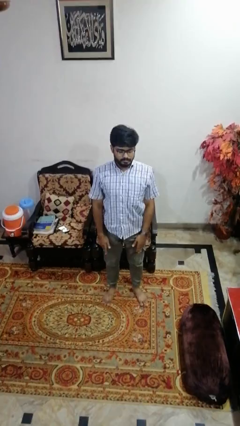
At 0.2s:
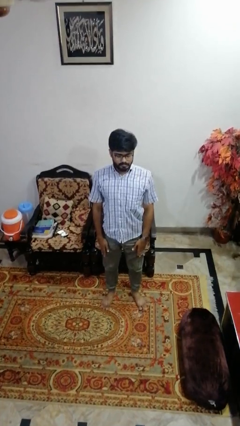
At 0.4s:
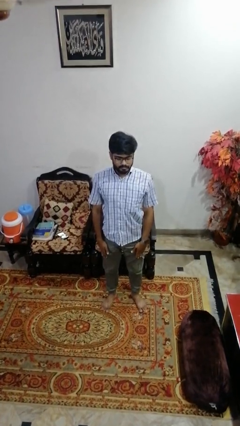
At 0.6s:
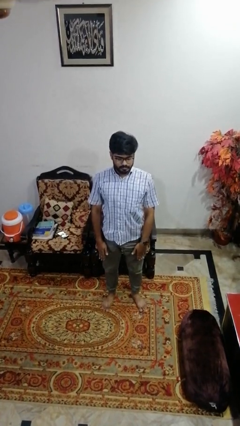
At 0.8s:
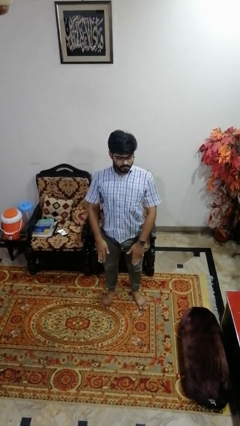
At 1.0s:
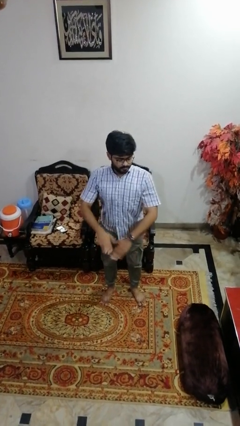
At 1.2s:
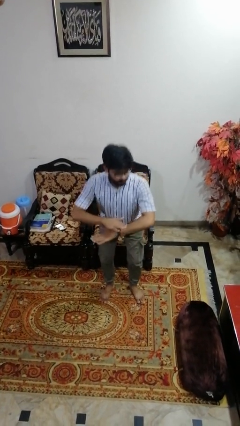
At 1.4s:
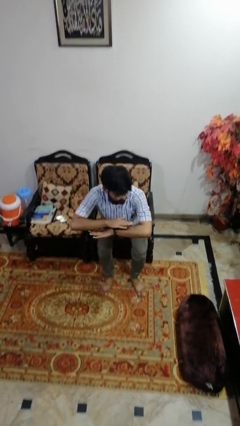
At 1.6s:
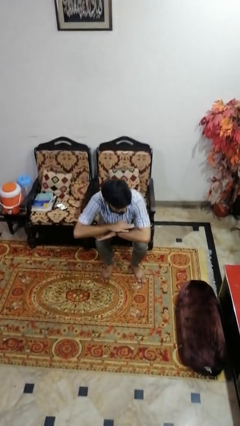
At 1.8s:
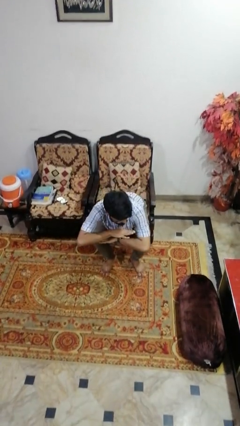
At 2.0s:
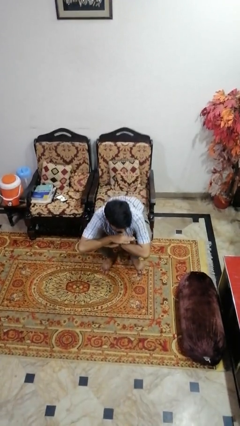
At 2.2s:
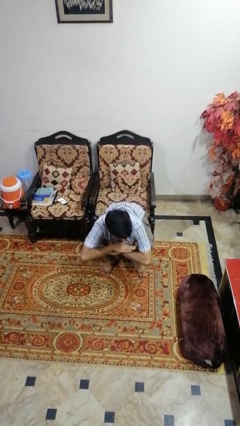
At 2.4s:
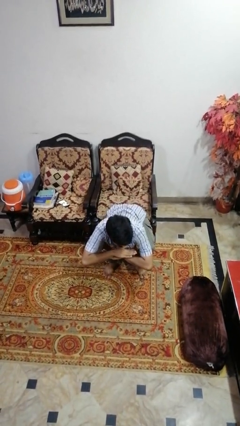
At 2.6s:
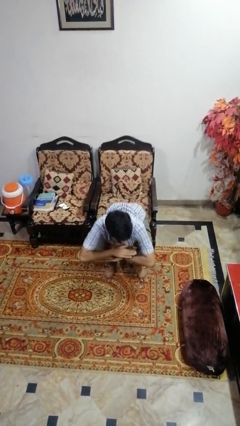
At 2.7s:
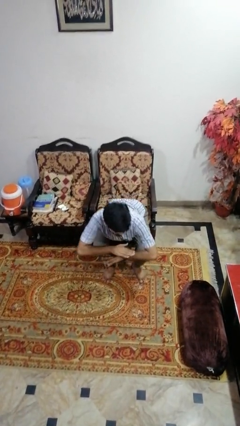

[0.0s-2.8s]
person squats

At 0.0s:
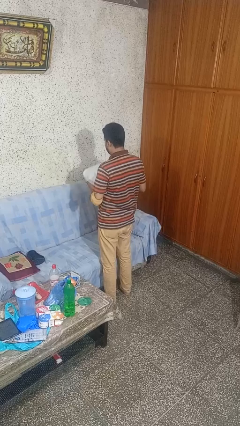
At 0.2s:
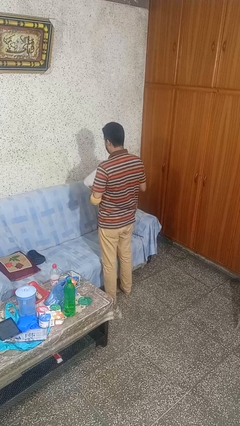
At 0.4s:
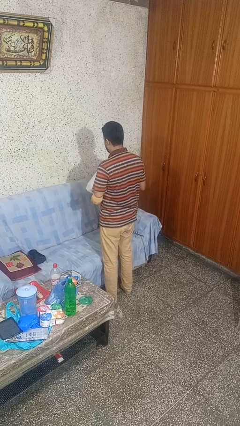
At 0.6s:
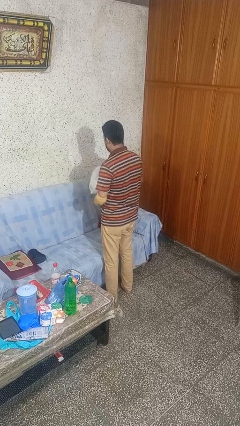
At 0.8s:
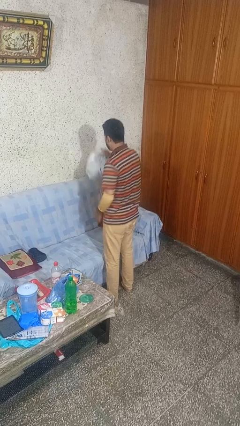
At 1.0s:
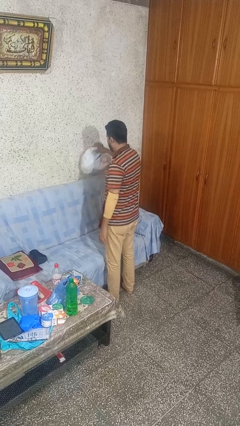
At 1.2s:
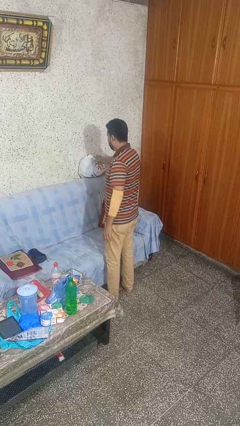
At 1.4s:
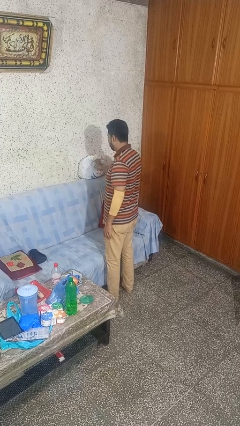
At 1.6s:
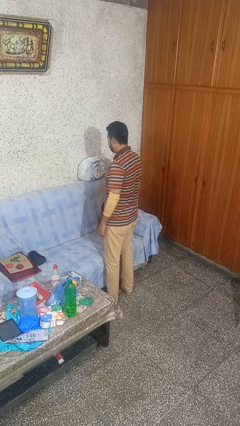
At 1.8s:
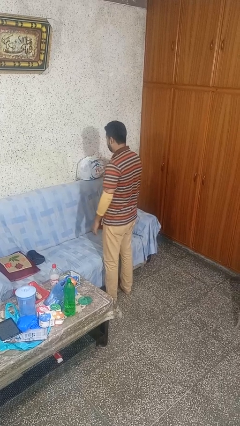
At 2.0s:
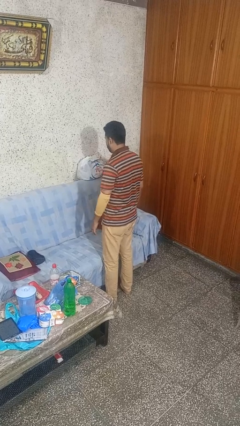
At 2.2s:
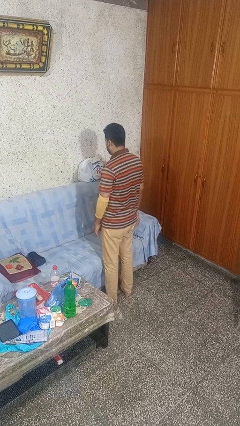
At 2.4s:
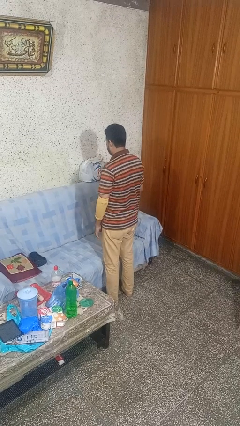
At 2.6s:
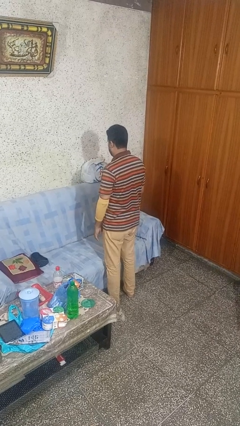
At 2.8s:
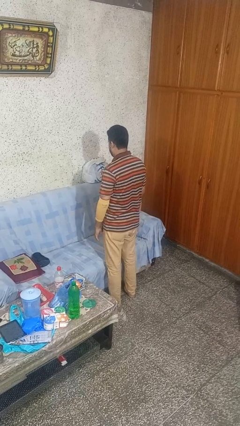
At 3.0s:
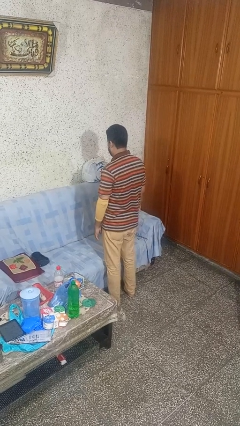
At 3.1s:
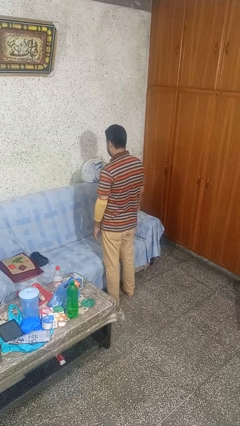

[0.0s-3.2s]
person puts down object on couch

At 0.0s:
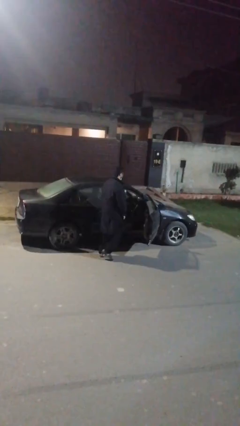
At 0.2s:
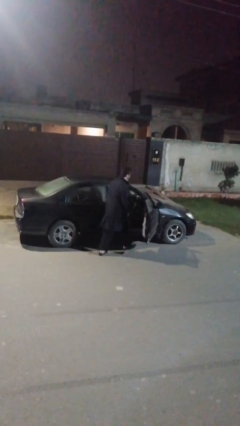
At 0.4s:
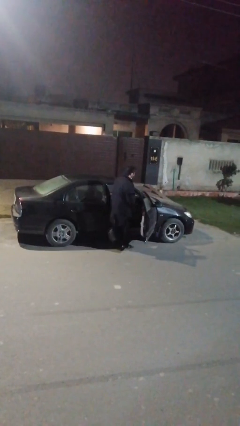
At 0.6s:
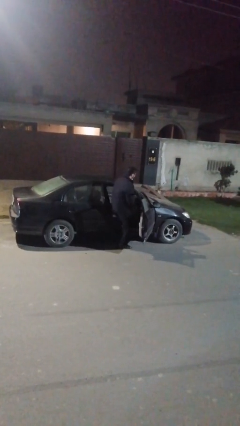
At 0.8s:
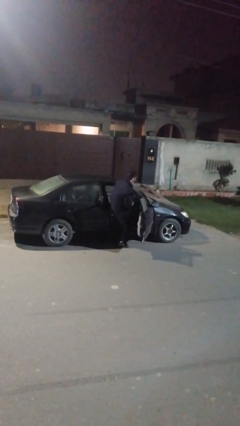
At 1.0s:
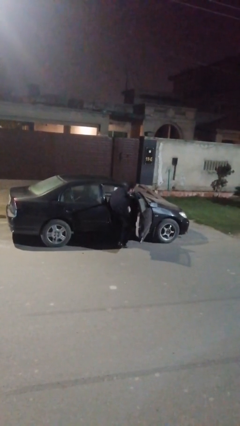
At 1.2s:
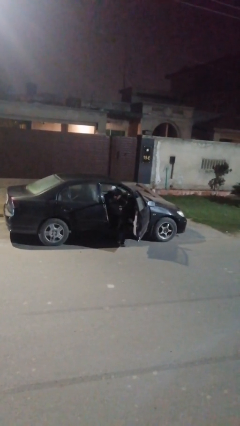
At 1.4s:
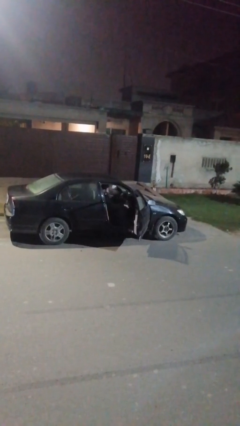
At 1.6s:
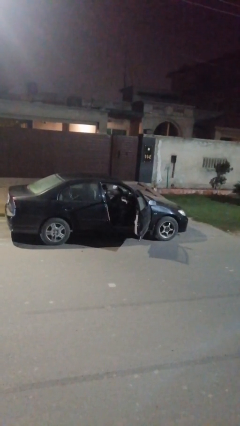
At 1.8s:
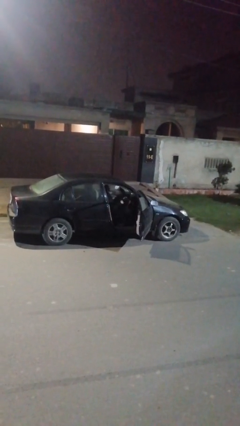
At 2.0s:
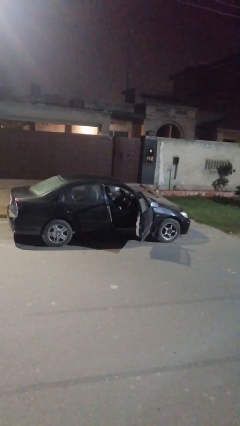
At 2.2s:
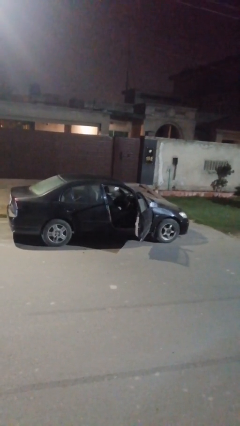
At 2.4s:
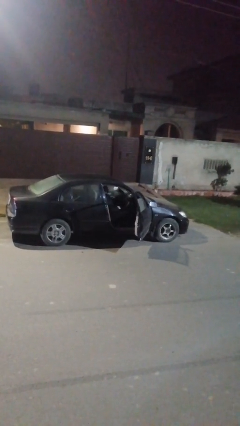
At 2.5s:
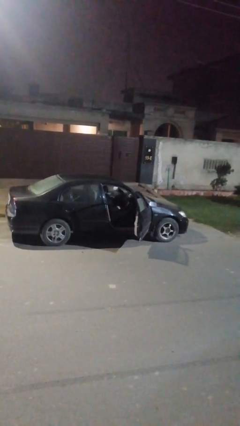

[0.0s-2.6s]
person enters car

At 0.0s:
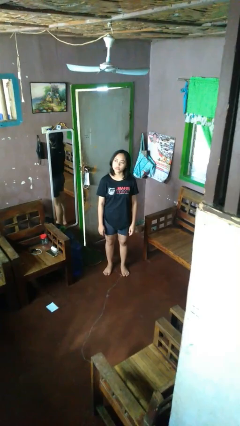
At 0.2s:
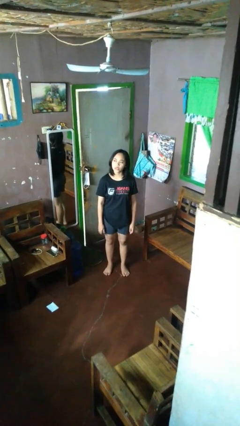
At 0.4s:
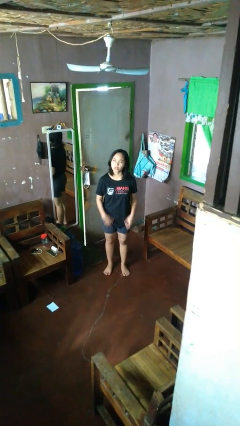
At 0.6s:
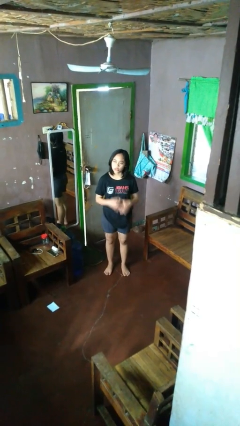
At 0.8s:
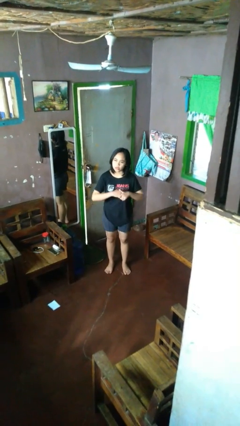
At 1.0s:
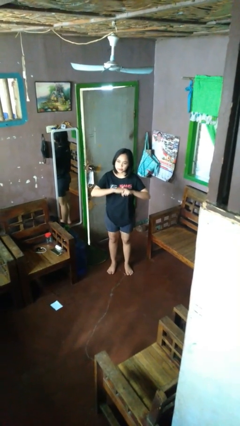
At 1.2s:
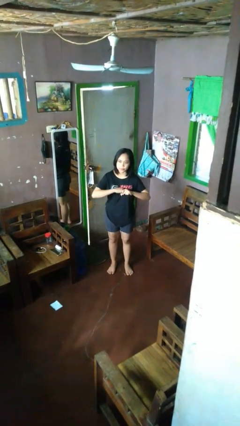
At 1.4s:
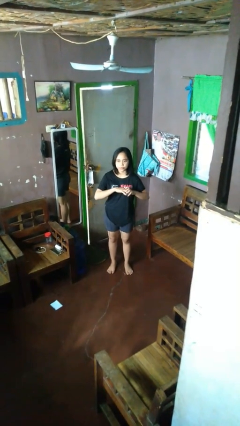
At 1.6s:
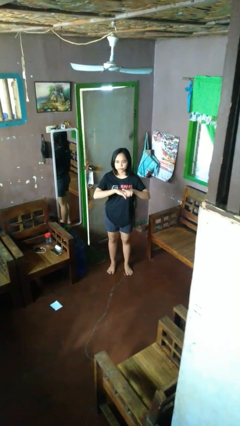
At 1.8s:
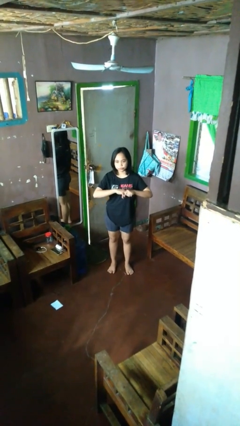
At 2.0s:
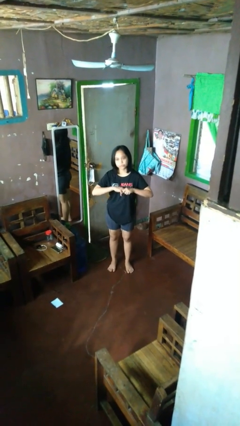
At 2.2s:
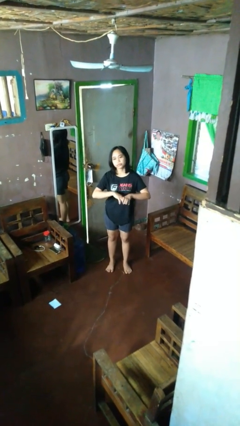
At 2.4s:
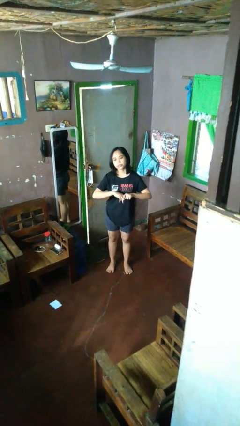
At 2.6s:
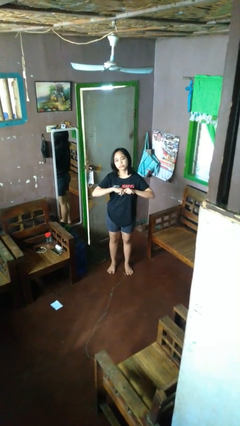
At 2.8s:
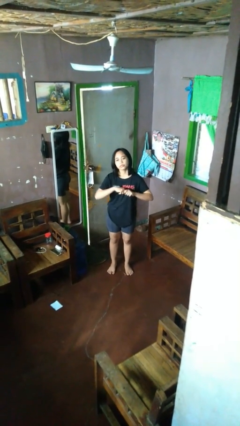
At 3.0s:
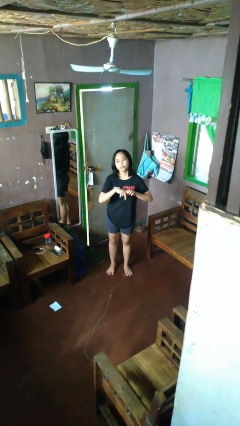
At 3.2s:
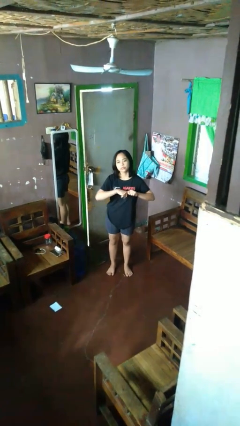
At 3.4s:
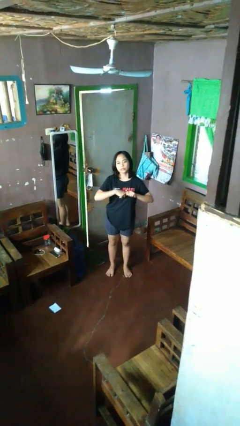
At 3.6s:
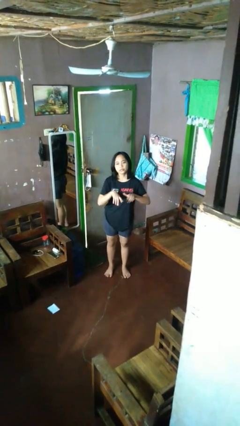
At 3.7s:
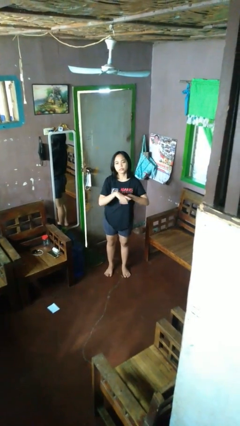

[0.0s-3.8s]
person cracks knuckles

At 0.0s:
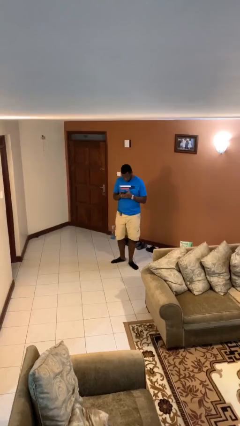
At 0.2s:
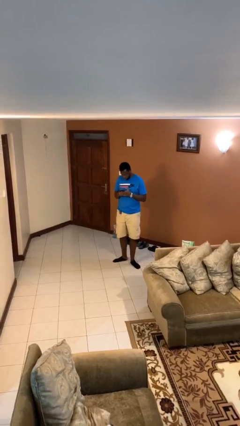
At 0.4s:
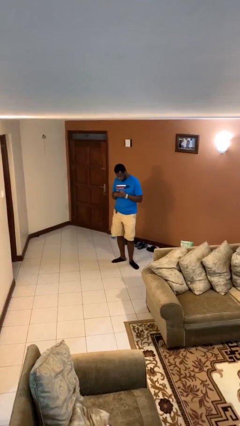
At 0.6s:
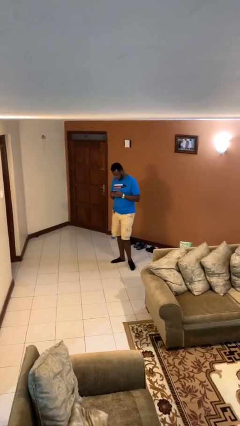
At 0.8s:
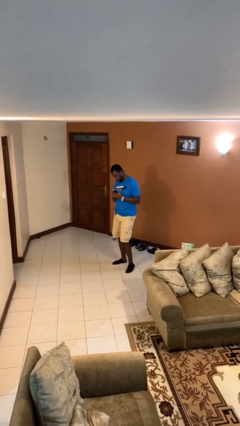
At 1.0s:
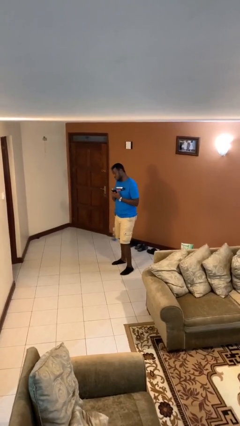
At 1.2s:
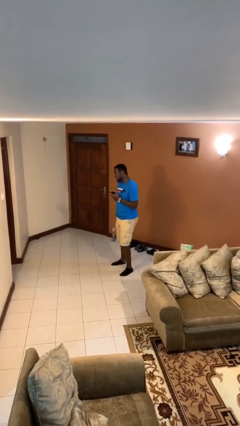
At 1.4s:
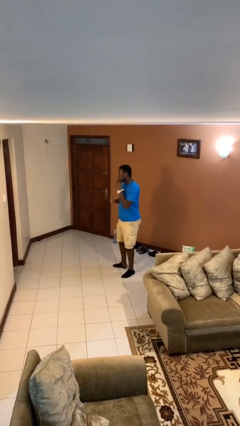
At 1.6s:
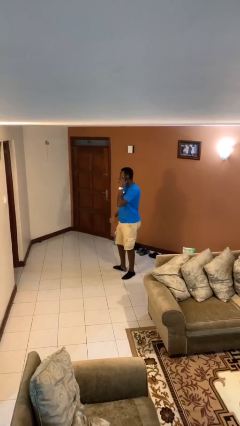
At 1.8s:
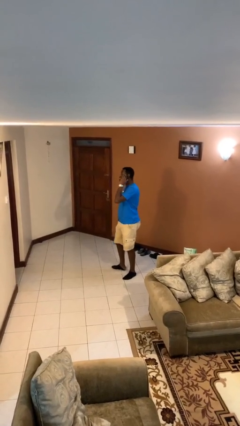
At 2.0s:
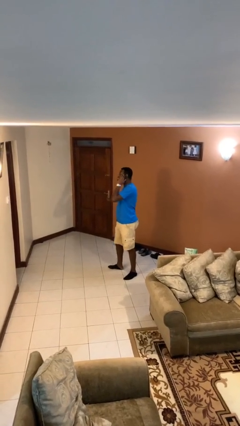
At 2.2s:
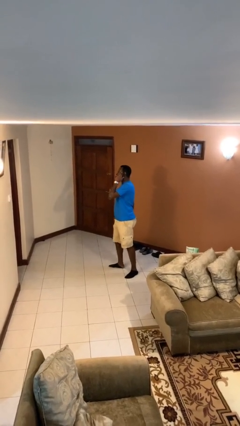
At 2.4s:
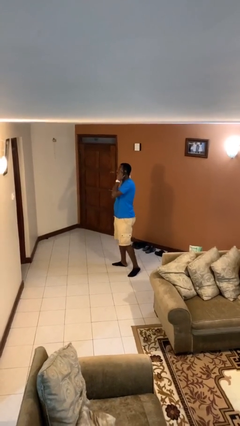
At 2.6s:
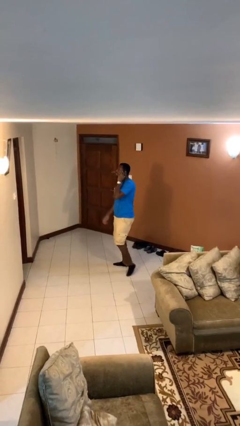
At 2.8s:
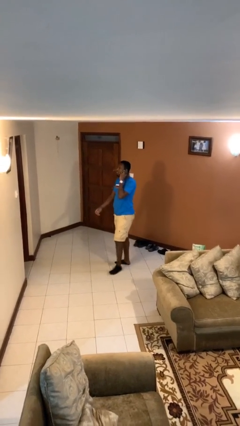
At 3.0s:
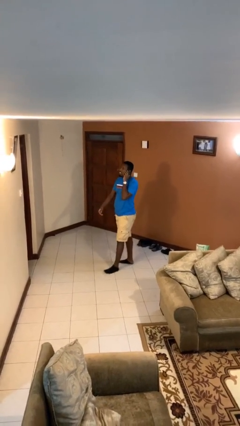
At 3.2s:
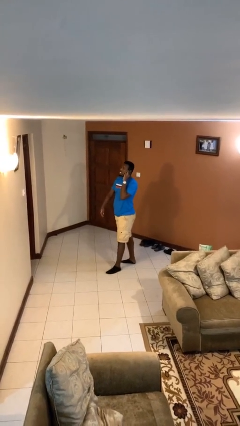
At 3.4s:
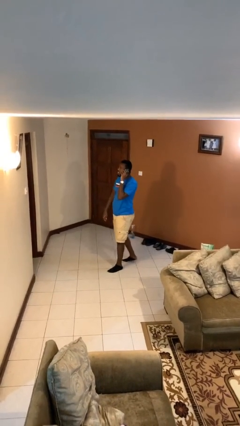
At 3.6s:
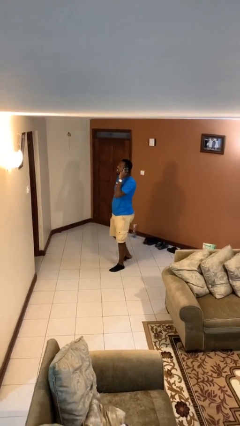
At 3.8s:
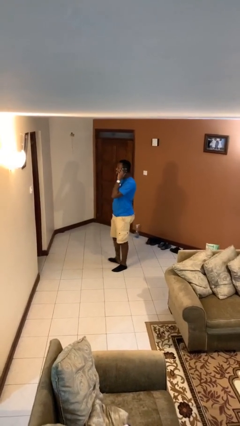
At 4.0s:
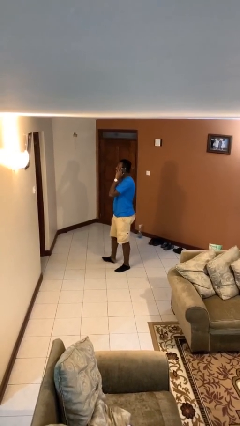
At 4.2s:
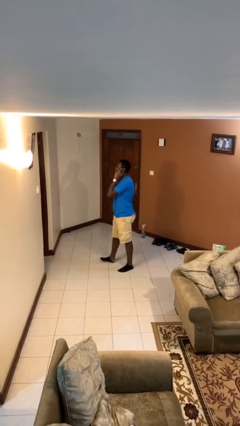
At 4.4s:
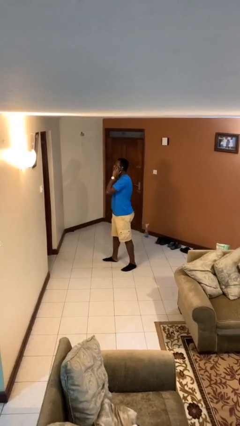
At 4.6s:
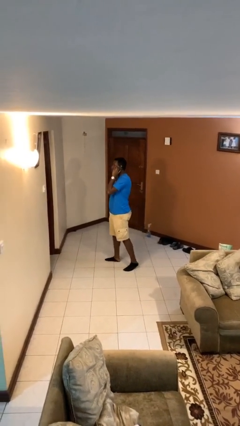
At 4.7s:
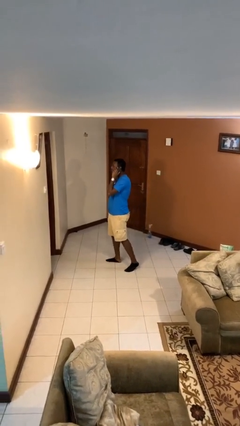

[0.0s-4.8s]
person talks on phone

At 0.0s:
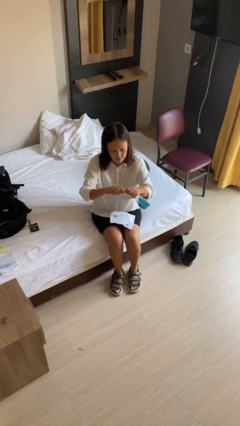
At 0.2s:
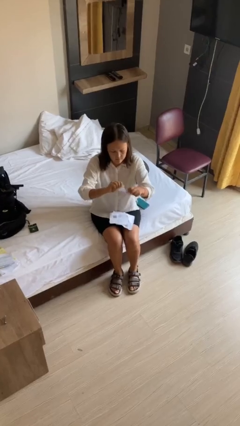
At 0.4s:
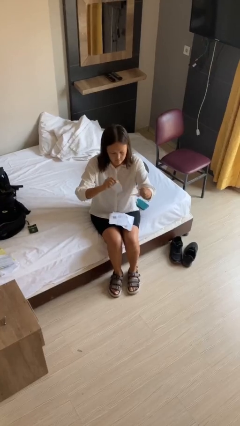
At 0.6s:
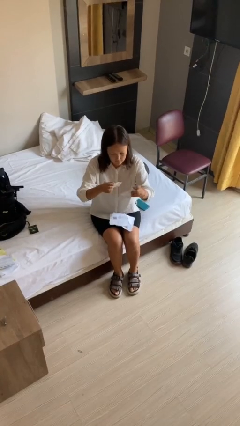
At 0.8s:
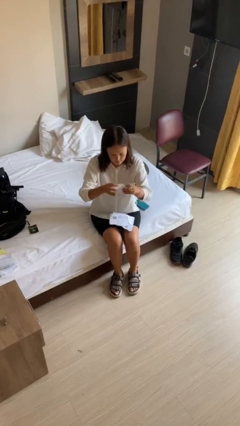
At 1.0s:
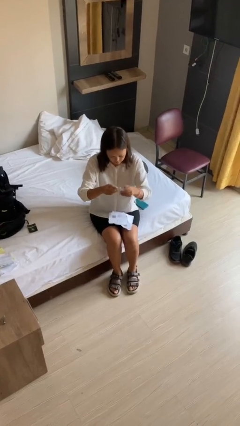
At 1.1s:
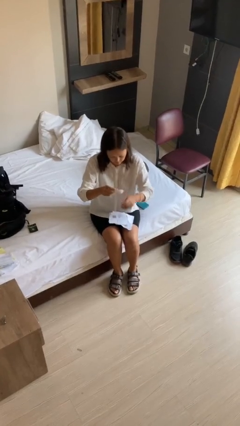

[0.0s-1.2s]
person tears paper
